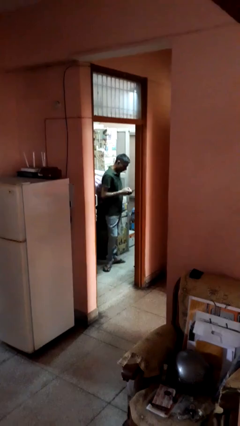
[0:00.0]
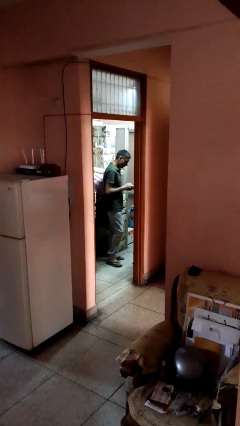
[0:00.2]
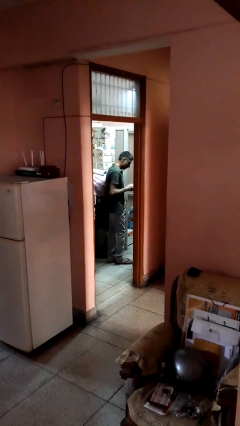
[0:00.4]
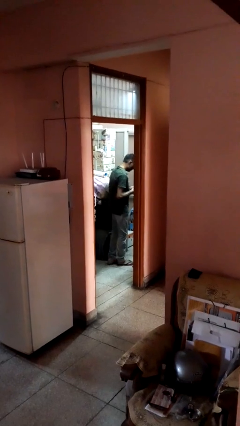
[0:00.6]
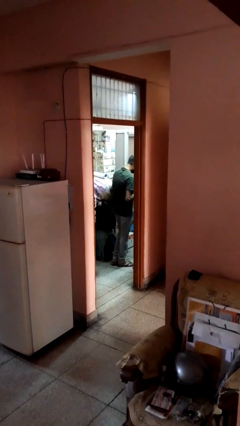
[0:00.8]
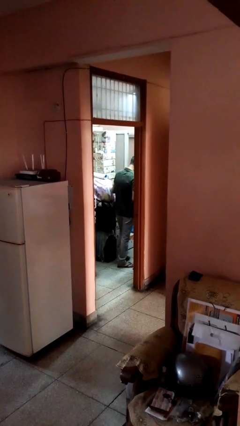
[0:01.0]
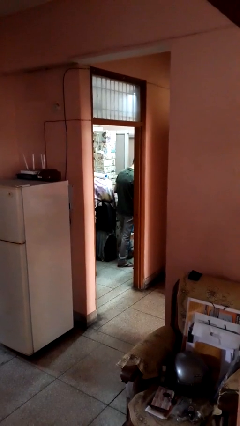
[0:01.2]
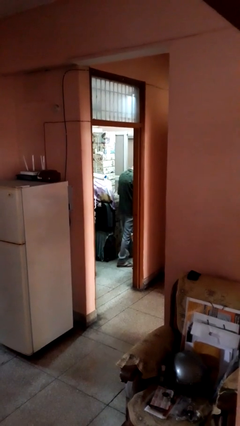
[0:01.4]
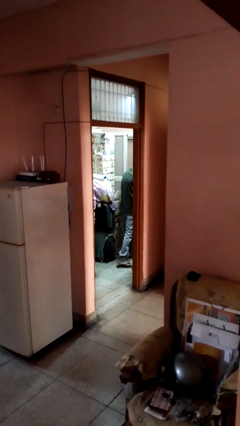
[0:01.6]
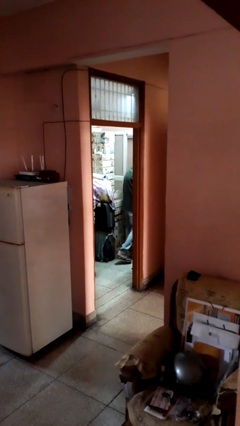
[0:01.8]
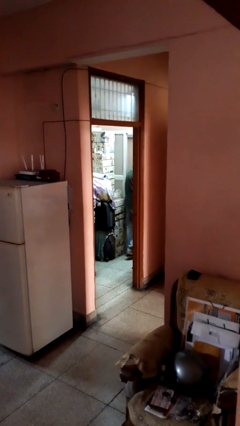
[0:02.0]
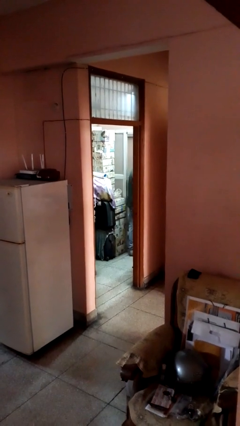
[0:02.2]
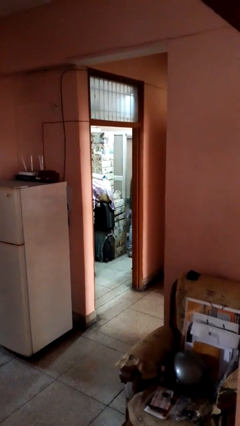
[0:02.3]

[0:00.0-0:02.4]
person exits scene through structure

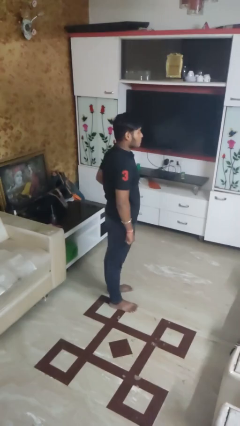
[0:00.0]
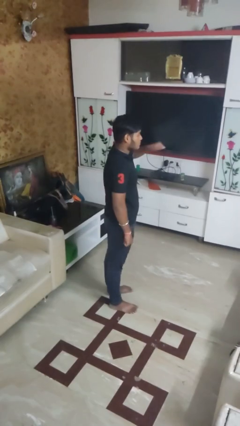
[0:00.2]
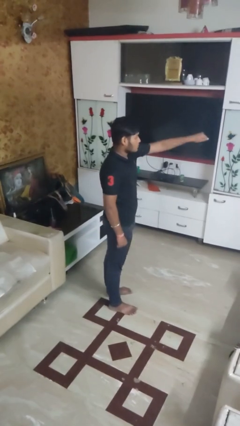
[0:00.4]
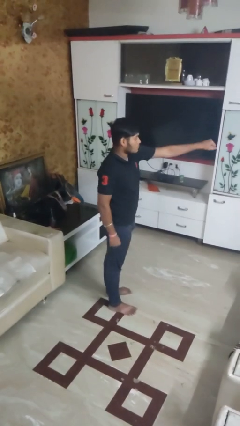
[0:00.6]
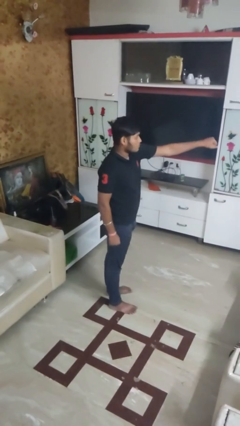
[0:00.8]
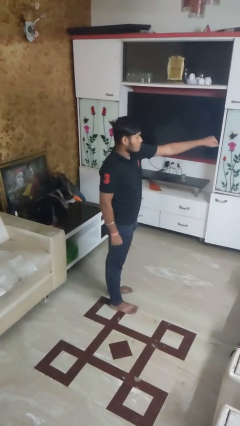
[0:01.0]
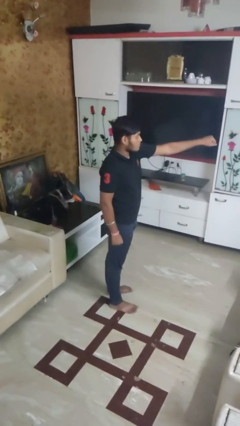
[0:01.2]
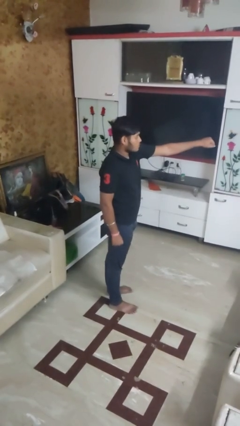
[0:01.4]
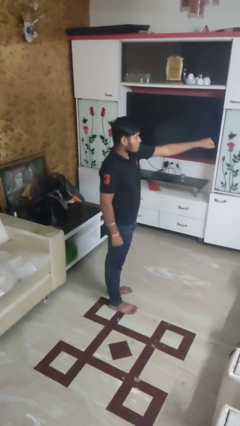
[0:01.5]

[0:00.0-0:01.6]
person punches

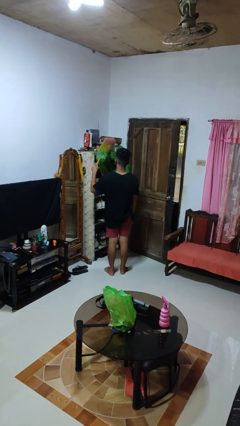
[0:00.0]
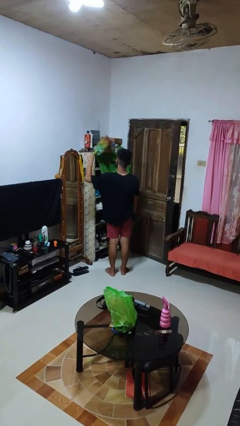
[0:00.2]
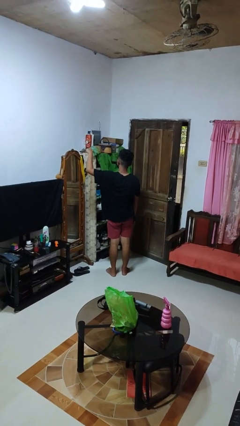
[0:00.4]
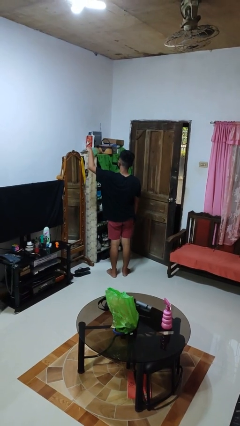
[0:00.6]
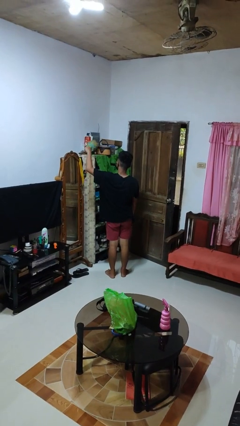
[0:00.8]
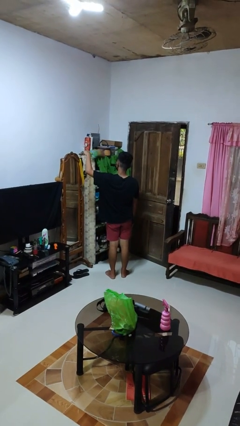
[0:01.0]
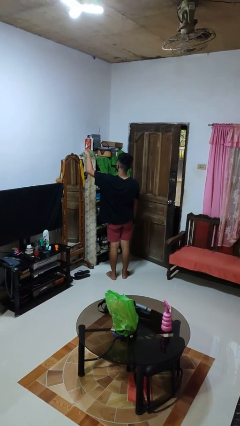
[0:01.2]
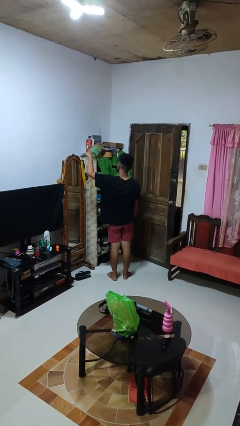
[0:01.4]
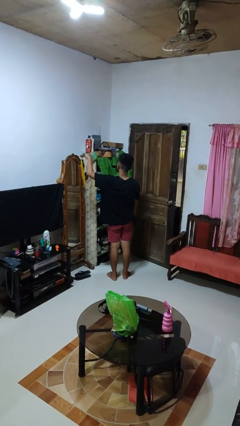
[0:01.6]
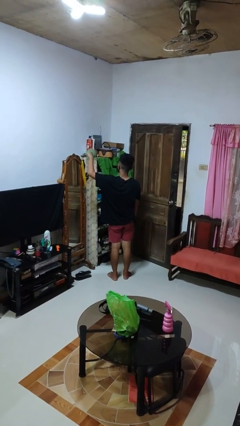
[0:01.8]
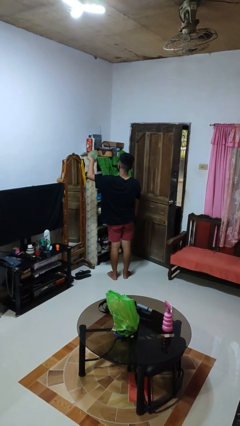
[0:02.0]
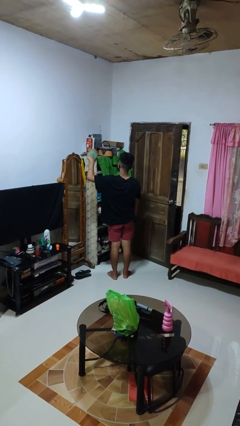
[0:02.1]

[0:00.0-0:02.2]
person dusts furniture

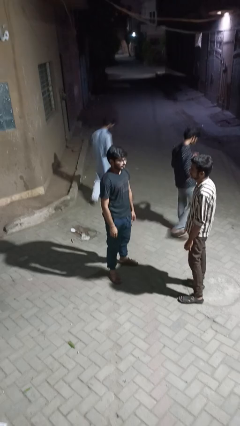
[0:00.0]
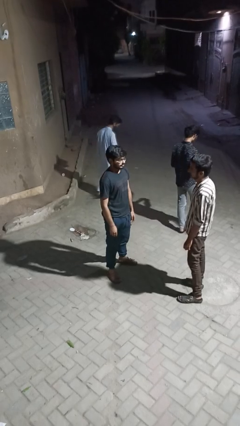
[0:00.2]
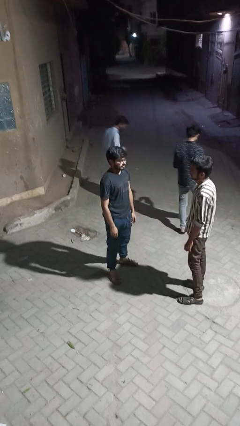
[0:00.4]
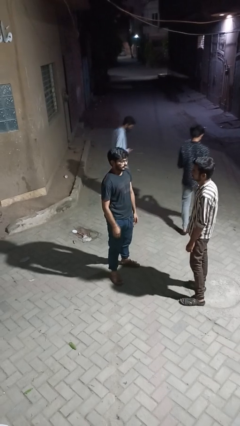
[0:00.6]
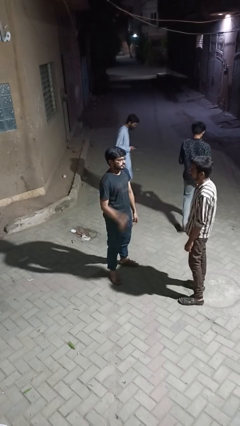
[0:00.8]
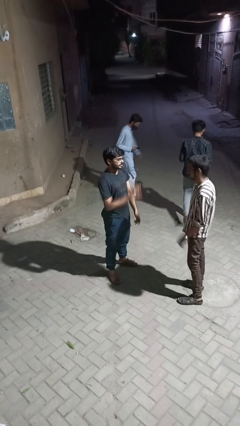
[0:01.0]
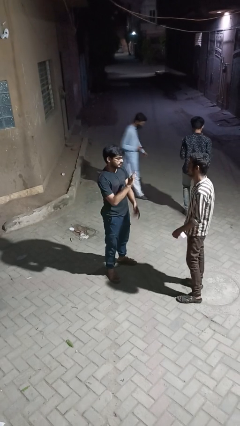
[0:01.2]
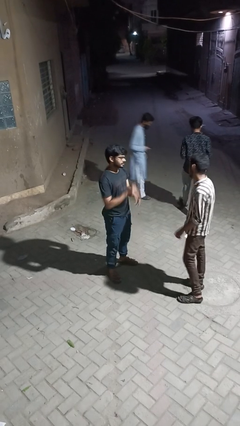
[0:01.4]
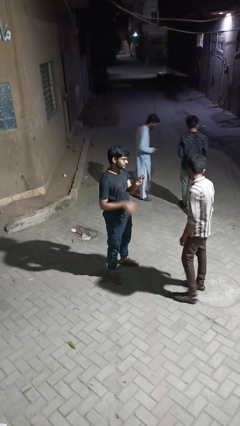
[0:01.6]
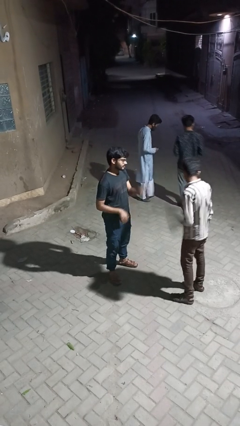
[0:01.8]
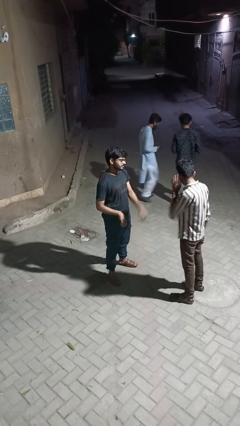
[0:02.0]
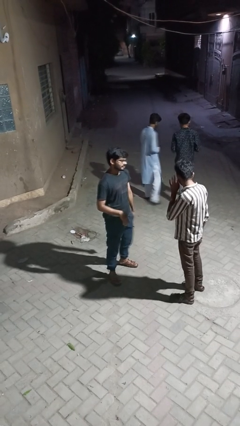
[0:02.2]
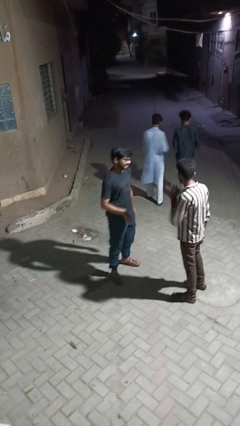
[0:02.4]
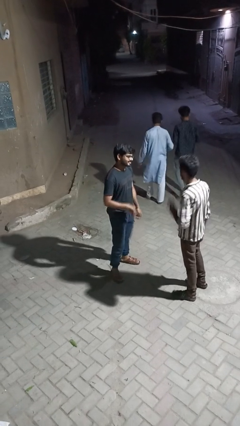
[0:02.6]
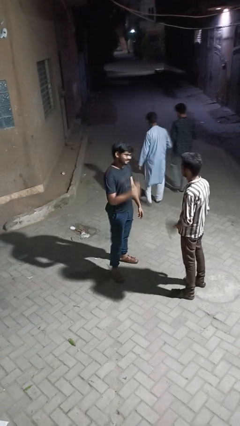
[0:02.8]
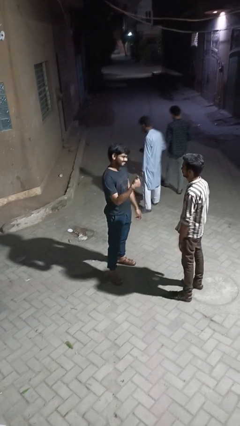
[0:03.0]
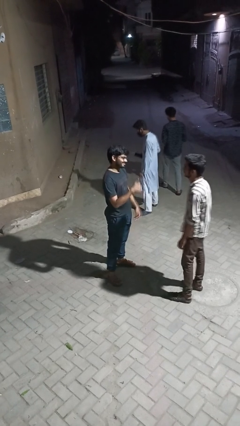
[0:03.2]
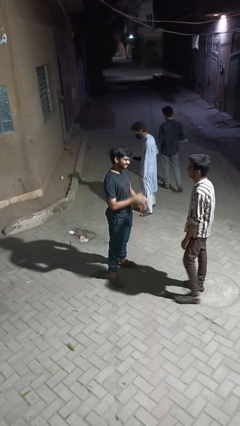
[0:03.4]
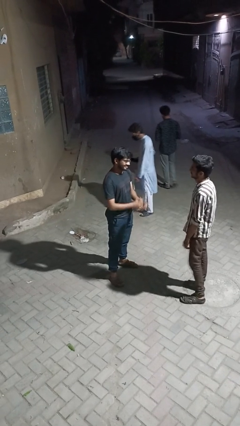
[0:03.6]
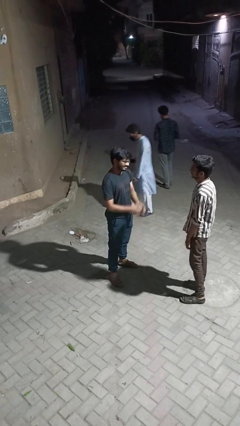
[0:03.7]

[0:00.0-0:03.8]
person talks to person

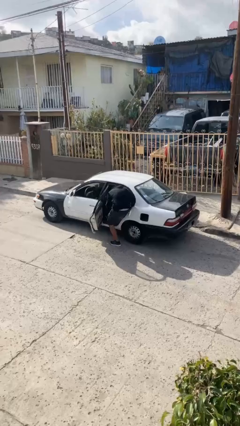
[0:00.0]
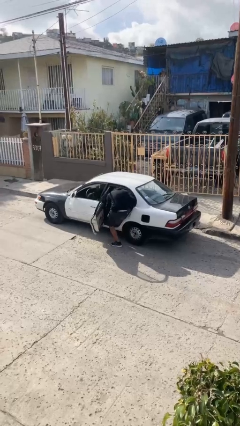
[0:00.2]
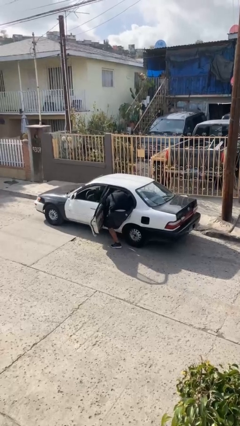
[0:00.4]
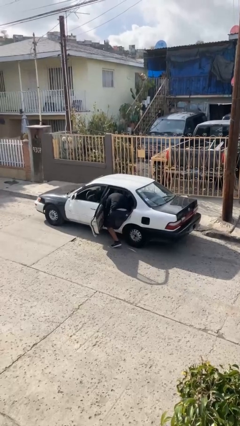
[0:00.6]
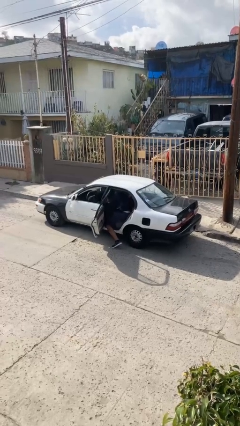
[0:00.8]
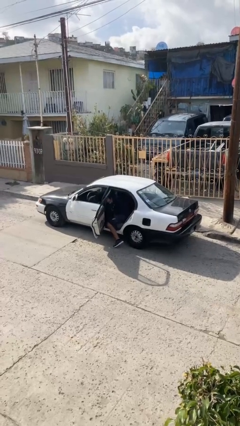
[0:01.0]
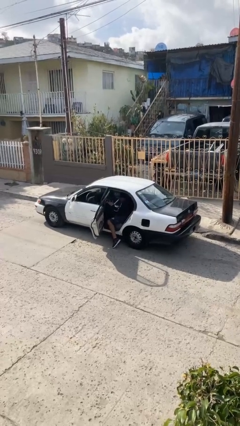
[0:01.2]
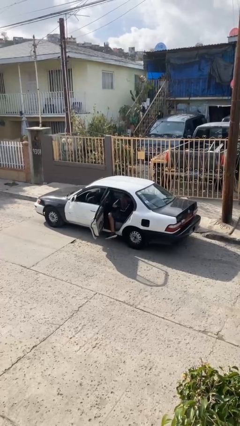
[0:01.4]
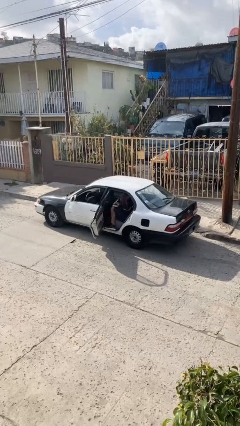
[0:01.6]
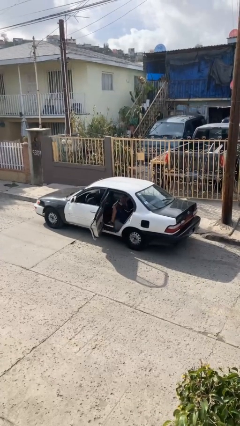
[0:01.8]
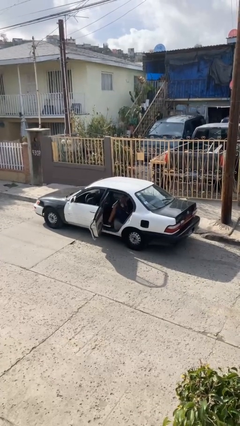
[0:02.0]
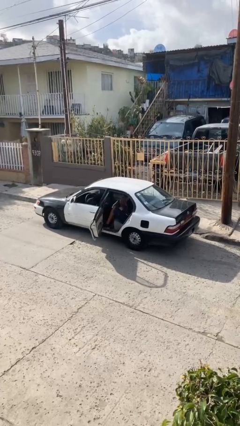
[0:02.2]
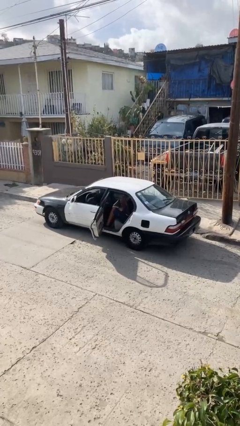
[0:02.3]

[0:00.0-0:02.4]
person enters car

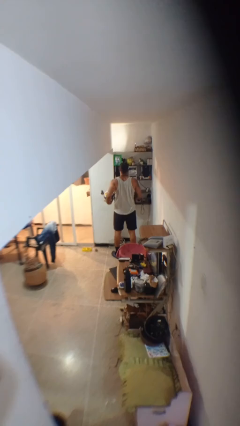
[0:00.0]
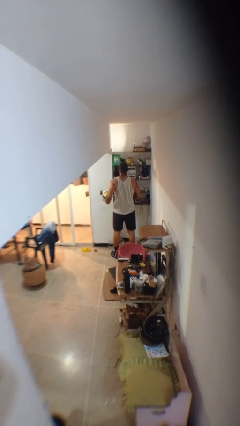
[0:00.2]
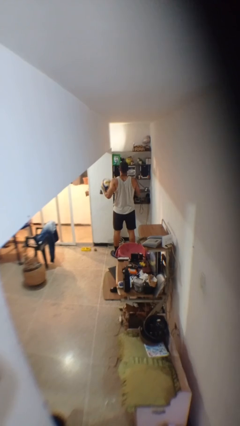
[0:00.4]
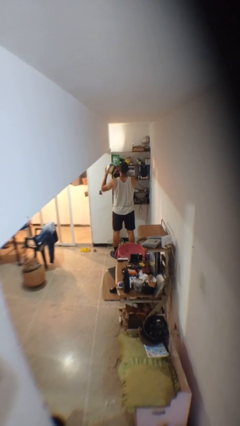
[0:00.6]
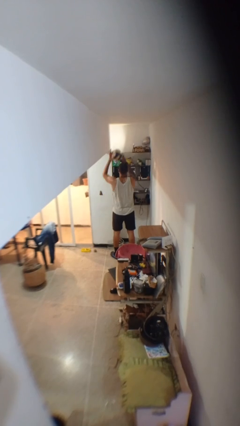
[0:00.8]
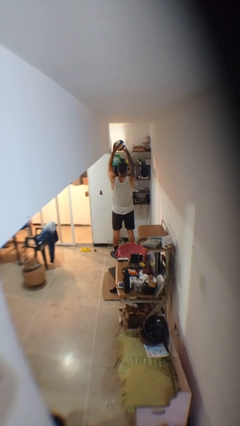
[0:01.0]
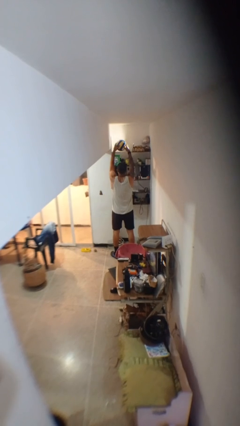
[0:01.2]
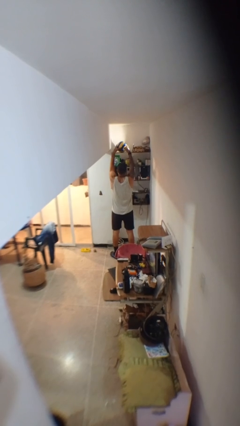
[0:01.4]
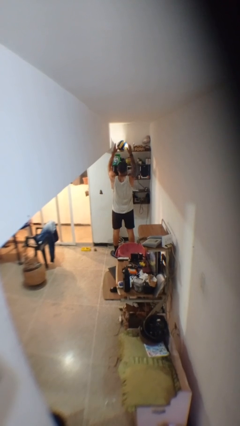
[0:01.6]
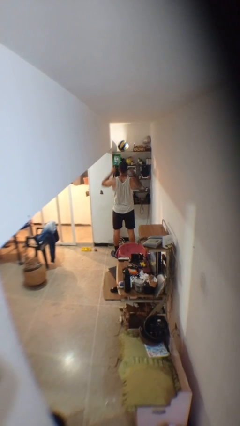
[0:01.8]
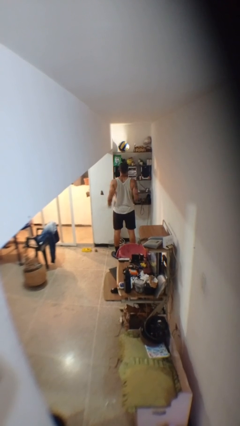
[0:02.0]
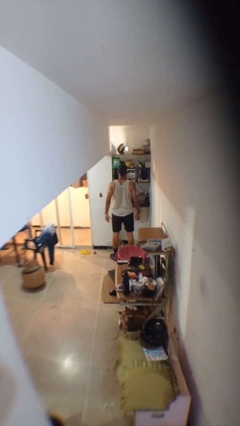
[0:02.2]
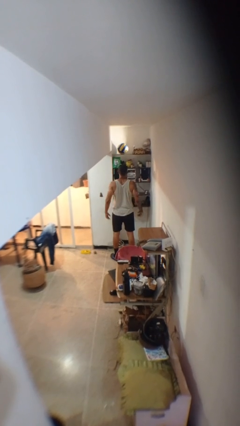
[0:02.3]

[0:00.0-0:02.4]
person puts down object on shelf

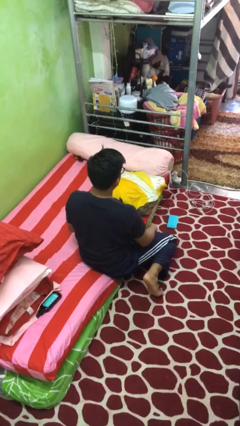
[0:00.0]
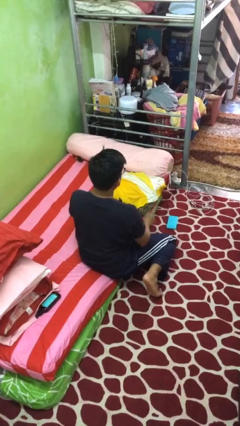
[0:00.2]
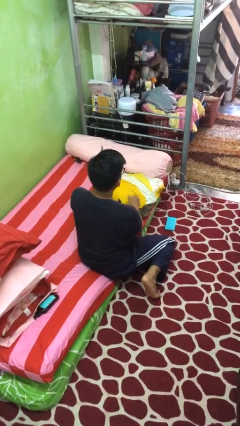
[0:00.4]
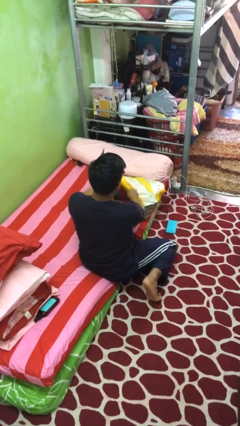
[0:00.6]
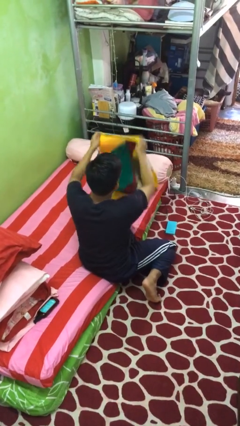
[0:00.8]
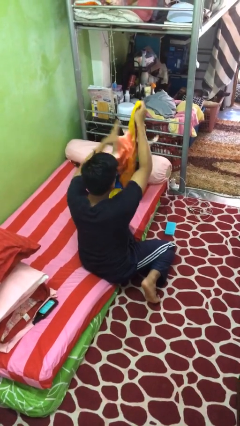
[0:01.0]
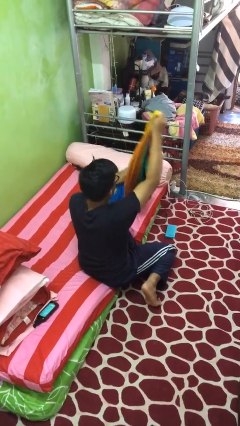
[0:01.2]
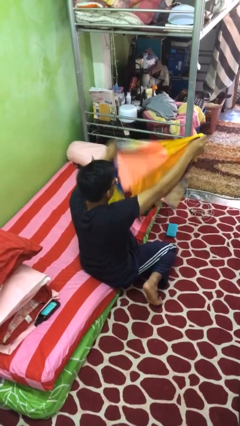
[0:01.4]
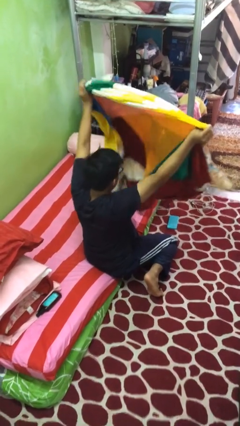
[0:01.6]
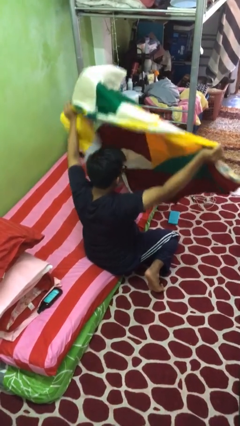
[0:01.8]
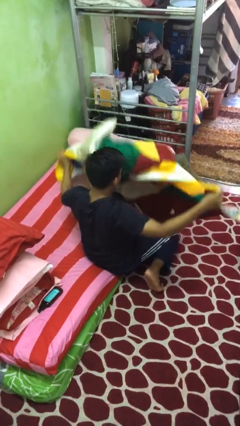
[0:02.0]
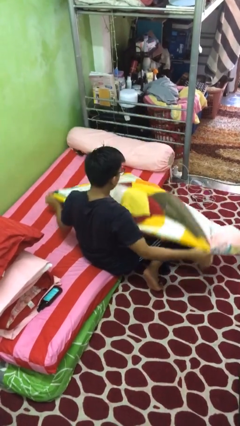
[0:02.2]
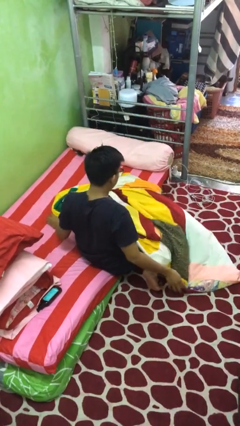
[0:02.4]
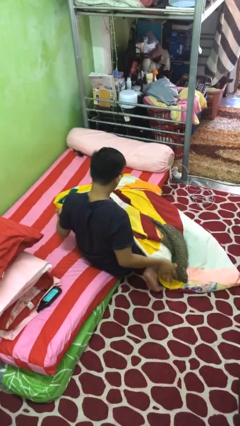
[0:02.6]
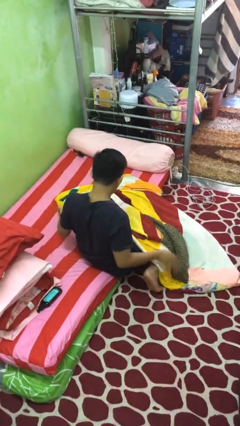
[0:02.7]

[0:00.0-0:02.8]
person unfolds blanket
